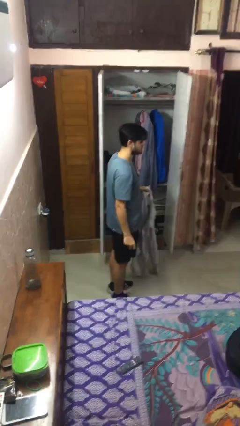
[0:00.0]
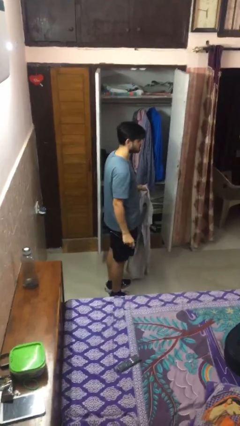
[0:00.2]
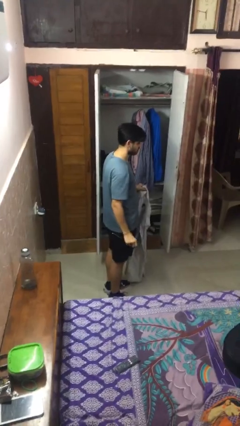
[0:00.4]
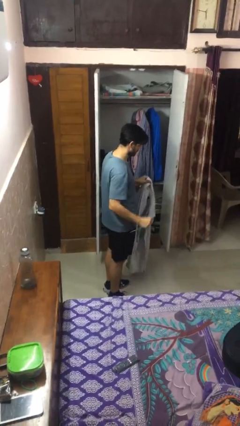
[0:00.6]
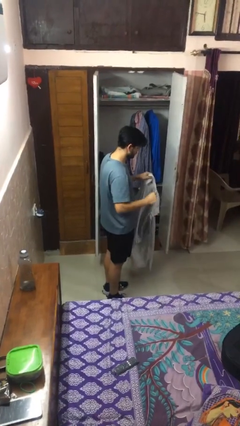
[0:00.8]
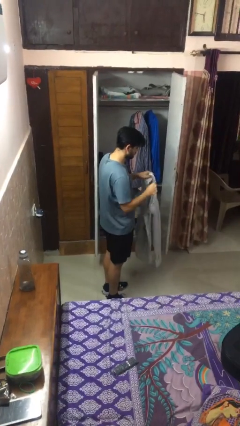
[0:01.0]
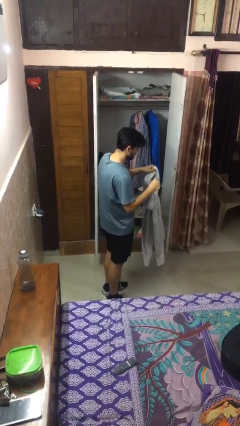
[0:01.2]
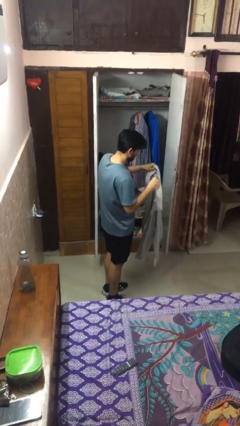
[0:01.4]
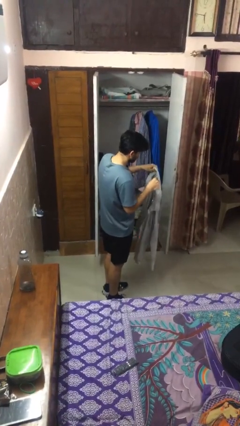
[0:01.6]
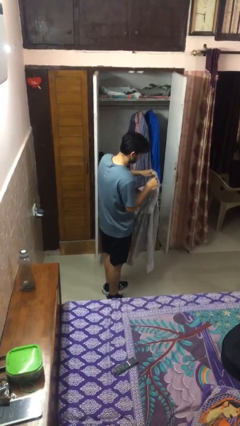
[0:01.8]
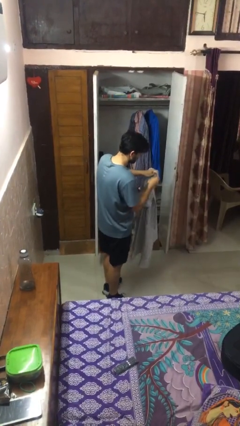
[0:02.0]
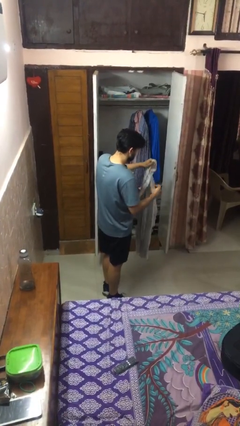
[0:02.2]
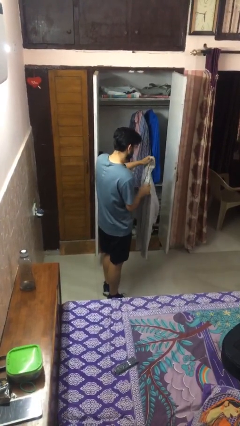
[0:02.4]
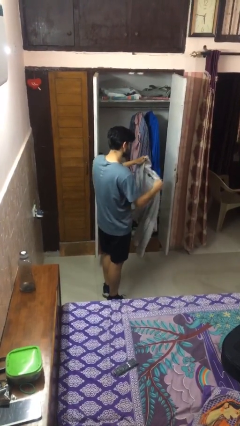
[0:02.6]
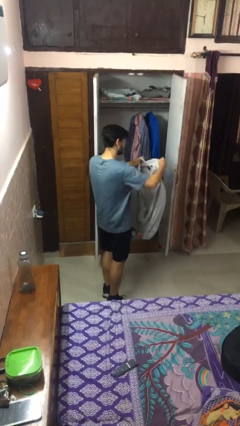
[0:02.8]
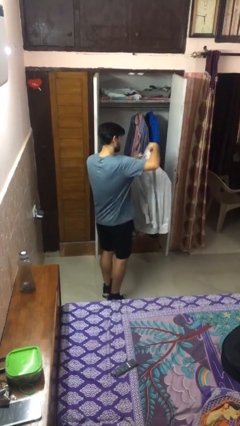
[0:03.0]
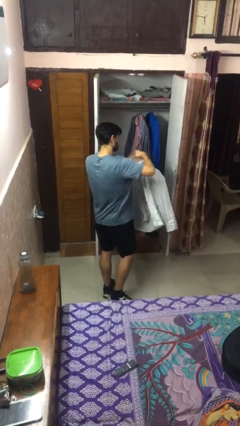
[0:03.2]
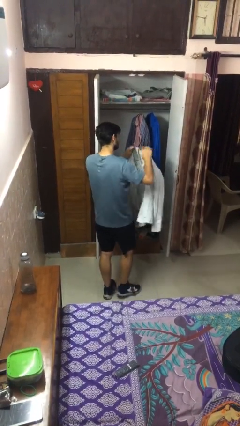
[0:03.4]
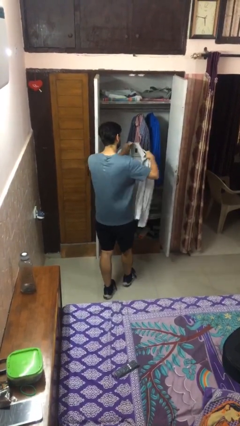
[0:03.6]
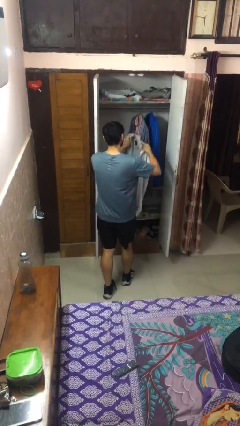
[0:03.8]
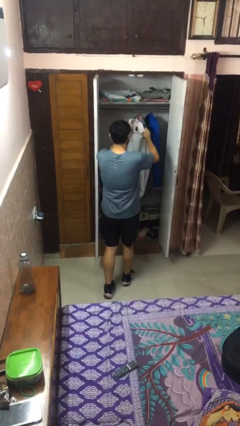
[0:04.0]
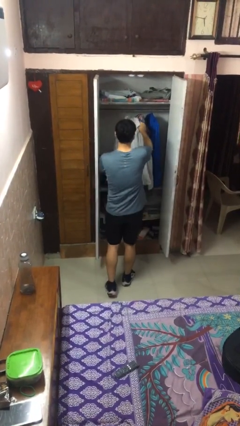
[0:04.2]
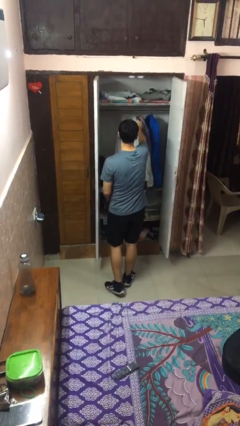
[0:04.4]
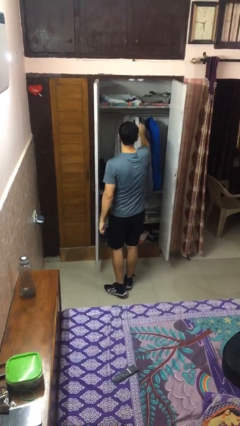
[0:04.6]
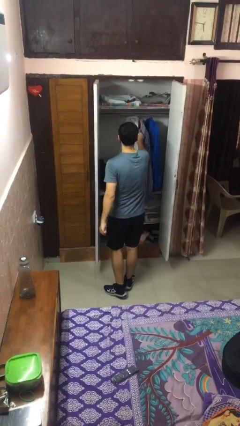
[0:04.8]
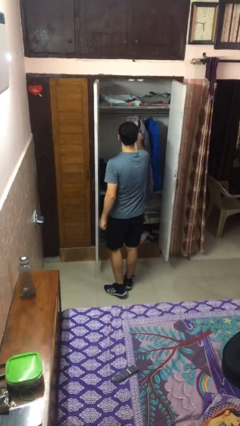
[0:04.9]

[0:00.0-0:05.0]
person puts clothes into closet

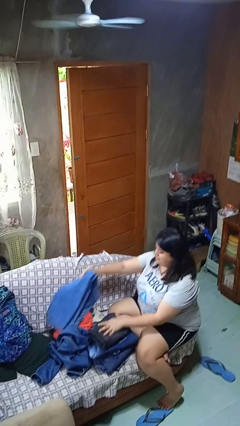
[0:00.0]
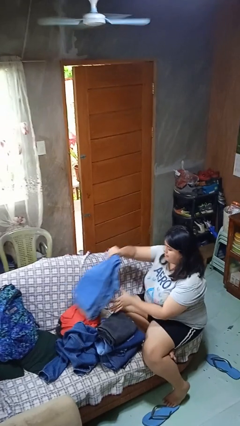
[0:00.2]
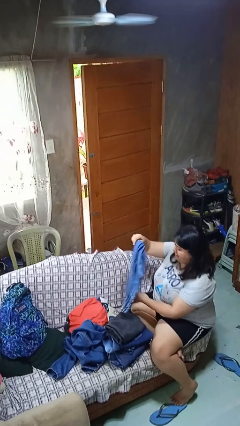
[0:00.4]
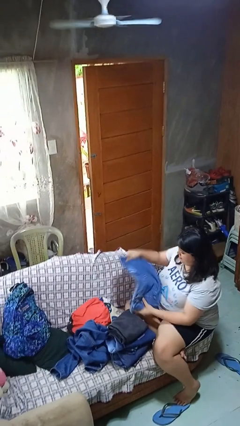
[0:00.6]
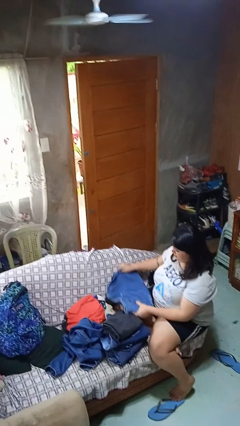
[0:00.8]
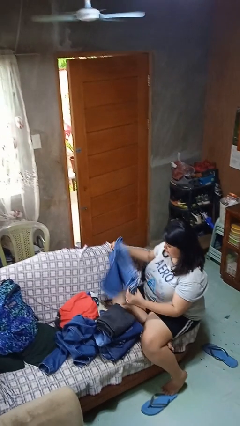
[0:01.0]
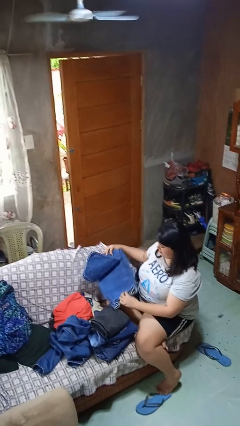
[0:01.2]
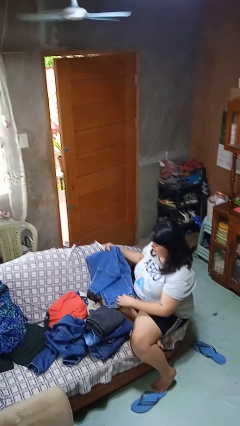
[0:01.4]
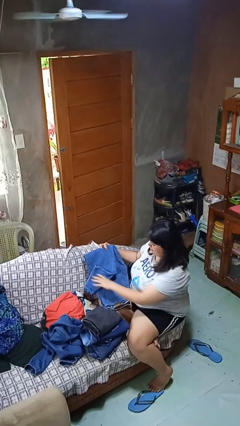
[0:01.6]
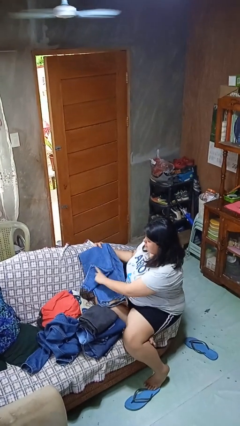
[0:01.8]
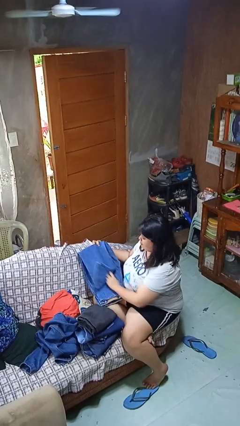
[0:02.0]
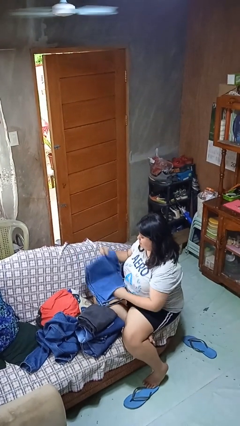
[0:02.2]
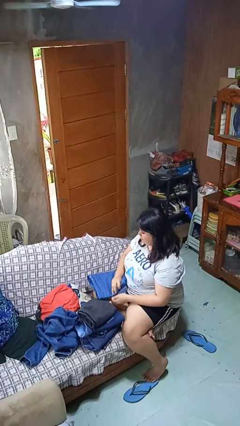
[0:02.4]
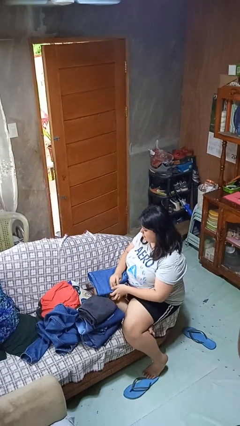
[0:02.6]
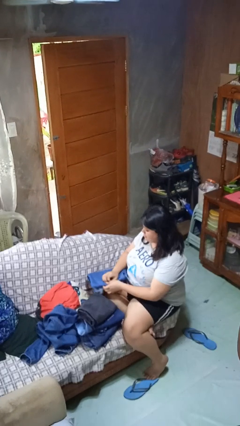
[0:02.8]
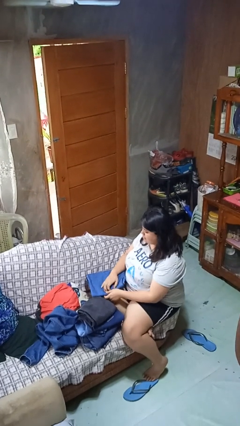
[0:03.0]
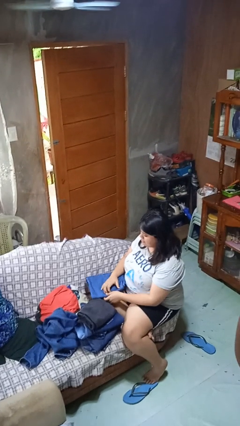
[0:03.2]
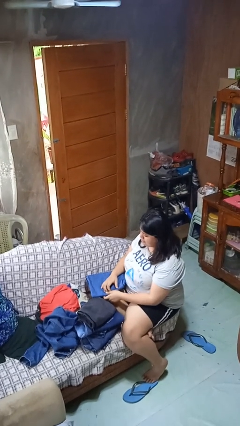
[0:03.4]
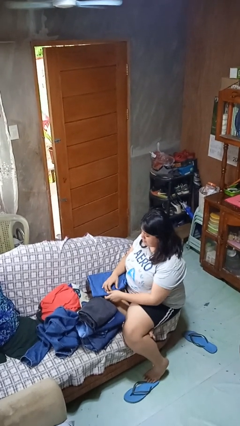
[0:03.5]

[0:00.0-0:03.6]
person folds pants

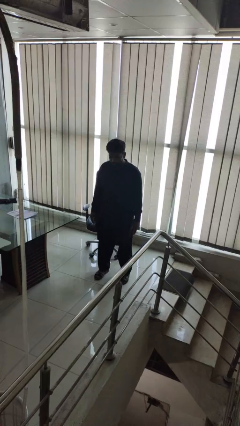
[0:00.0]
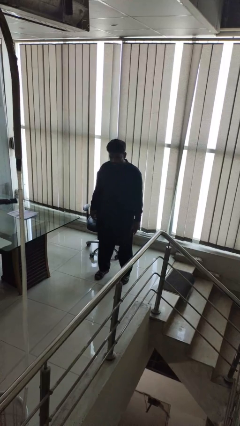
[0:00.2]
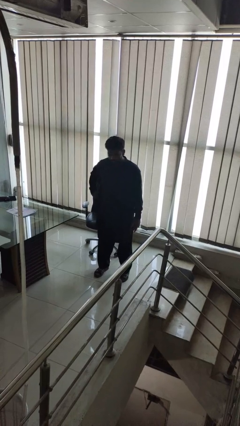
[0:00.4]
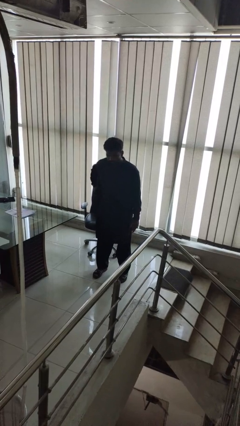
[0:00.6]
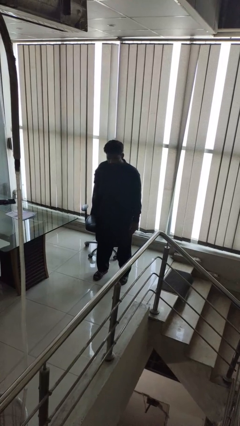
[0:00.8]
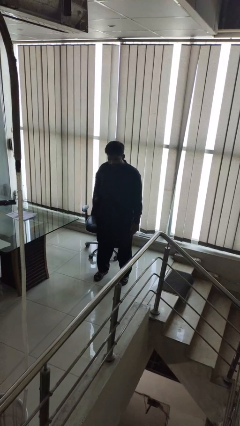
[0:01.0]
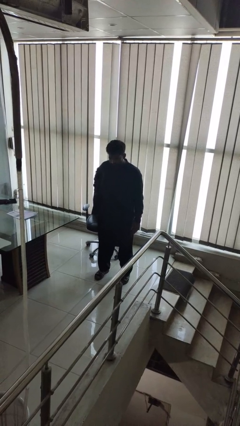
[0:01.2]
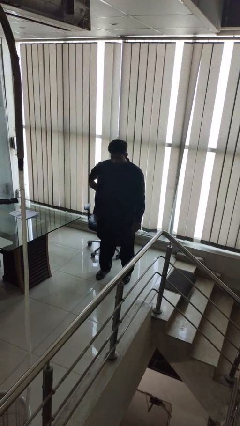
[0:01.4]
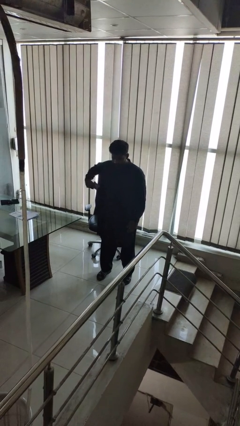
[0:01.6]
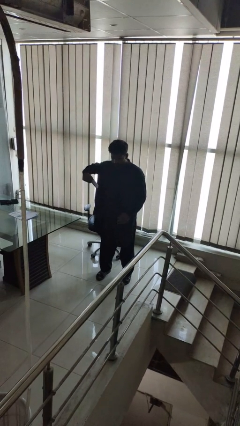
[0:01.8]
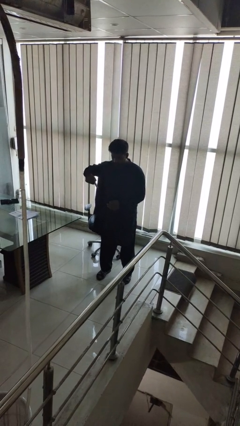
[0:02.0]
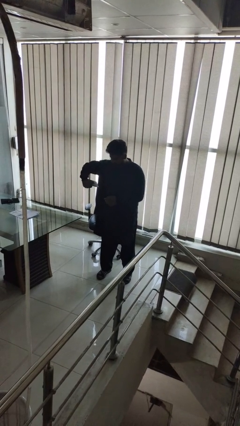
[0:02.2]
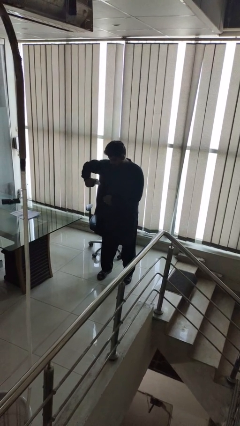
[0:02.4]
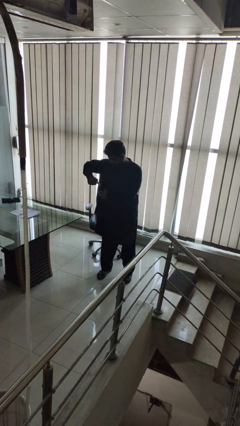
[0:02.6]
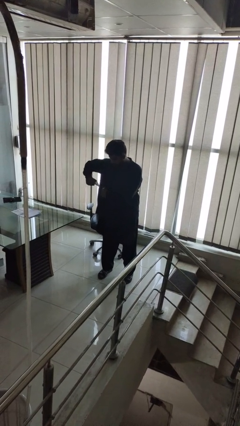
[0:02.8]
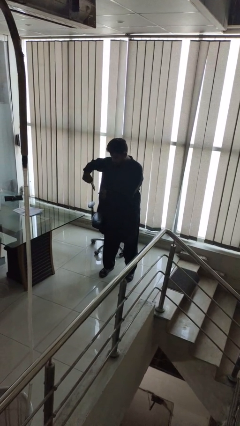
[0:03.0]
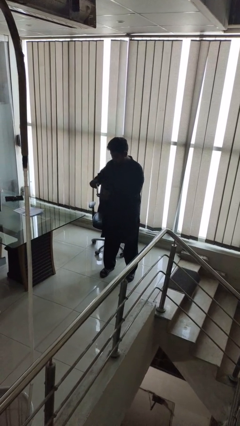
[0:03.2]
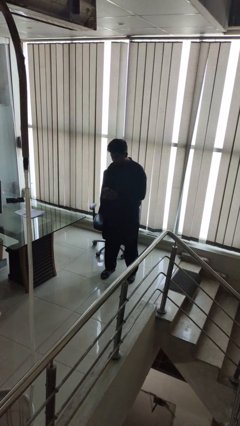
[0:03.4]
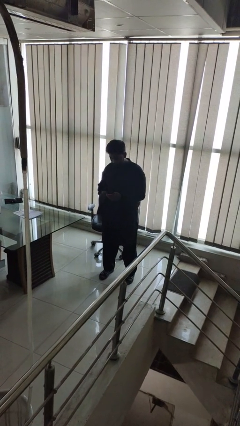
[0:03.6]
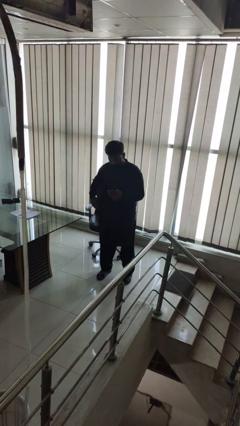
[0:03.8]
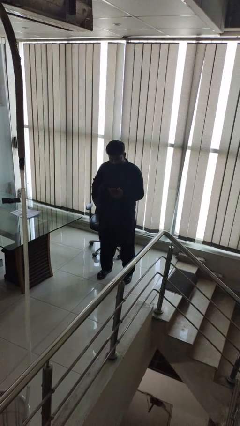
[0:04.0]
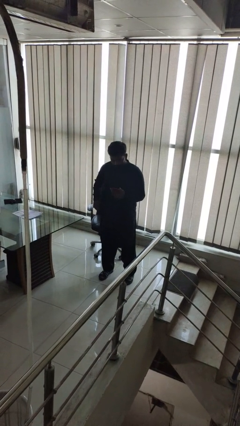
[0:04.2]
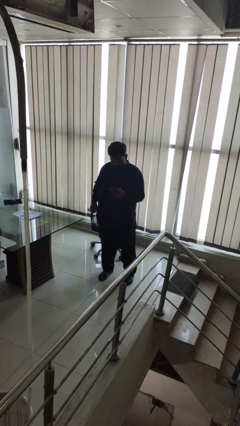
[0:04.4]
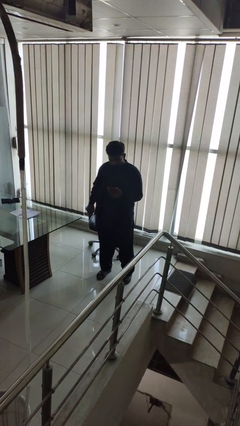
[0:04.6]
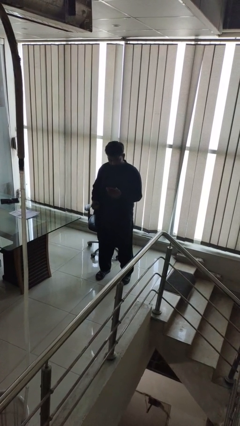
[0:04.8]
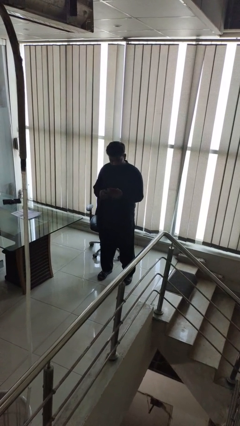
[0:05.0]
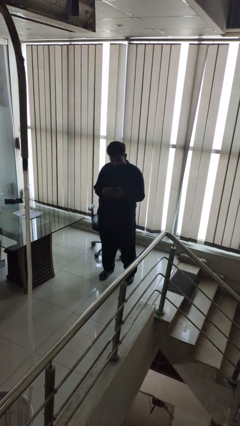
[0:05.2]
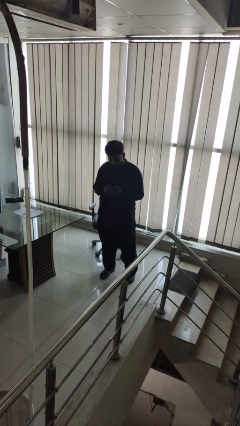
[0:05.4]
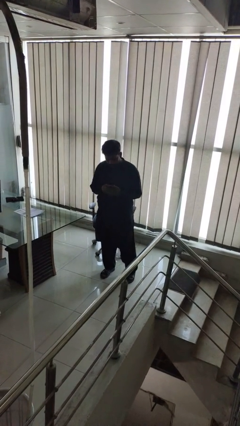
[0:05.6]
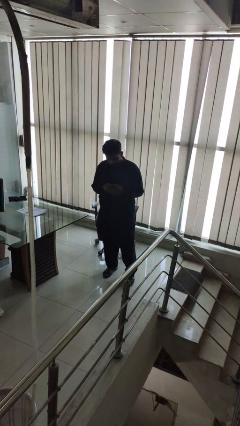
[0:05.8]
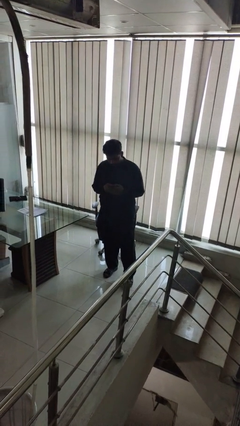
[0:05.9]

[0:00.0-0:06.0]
person takes phone from pocket

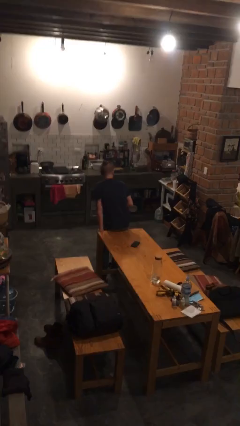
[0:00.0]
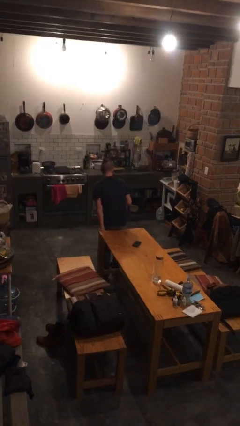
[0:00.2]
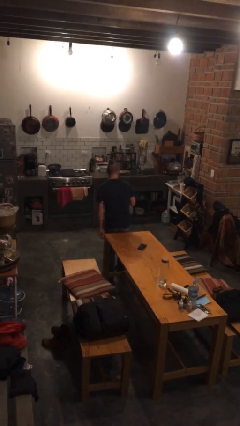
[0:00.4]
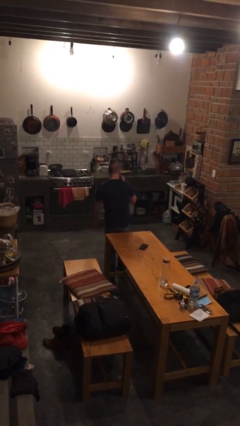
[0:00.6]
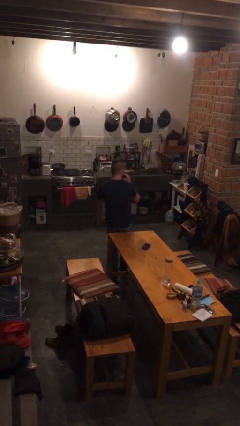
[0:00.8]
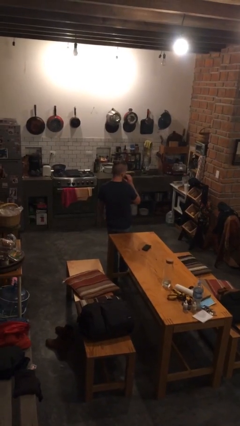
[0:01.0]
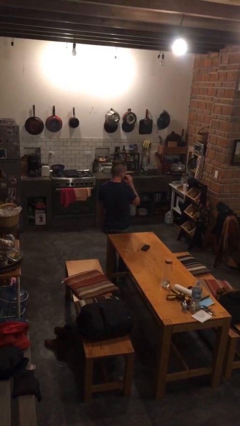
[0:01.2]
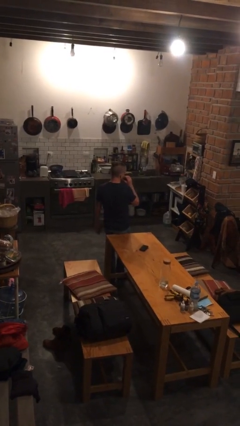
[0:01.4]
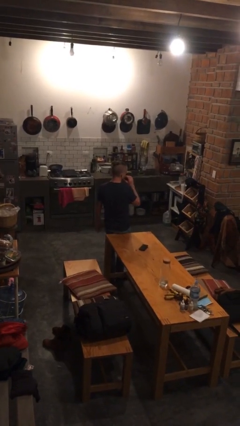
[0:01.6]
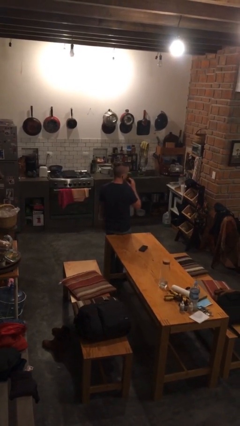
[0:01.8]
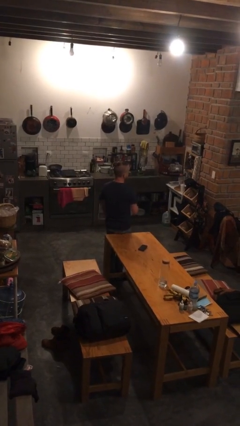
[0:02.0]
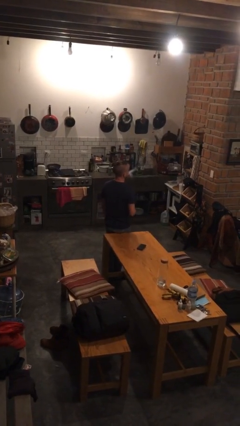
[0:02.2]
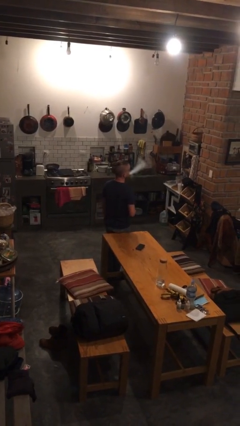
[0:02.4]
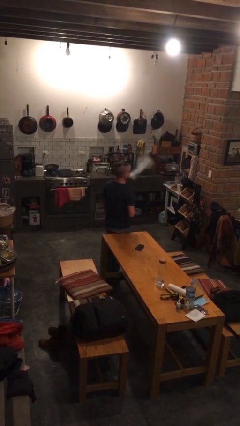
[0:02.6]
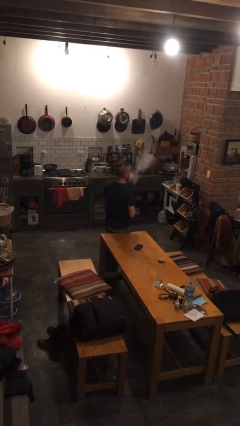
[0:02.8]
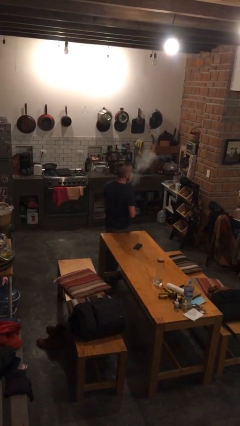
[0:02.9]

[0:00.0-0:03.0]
person vapes
